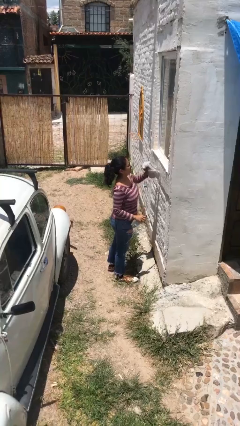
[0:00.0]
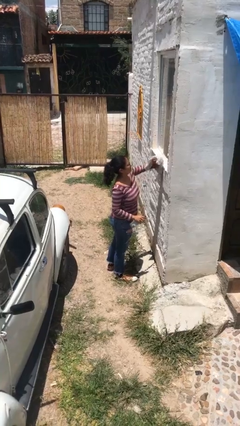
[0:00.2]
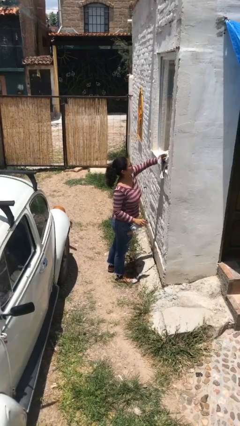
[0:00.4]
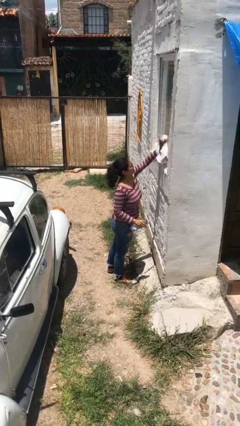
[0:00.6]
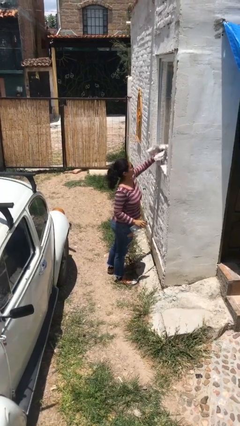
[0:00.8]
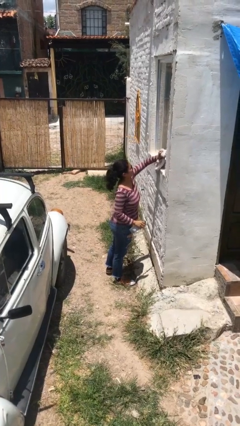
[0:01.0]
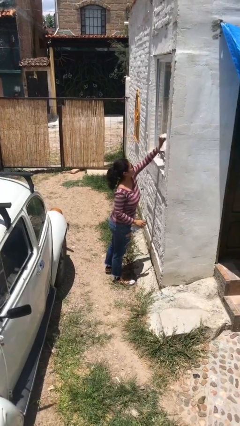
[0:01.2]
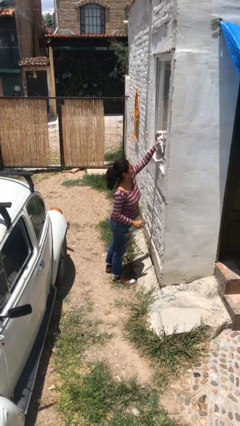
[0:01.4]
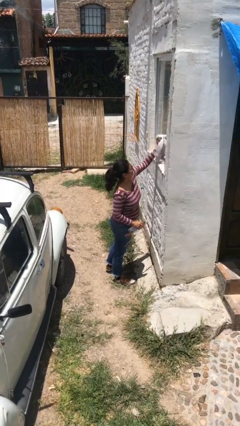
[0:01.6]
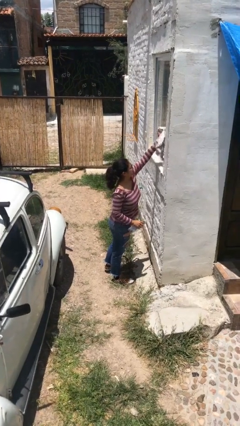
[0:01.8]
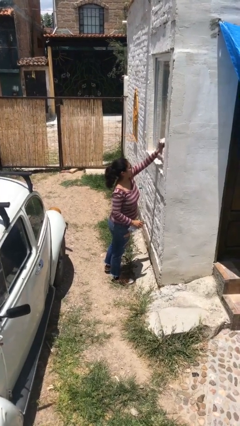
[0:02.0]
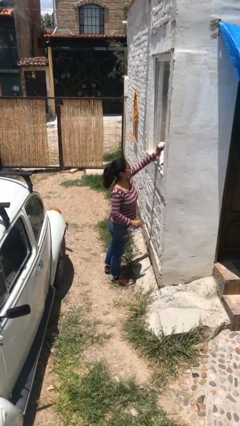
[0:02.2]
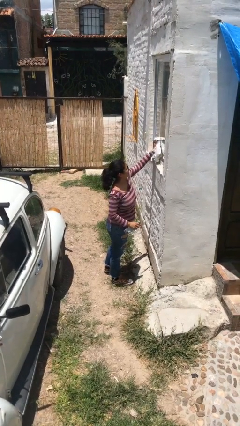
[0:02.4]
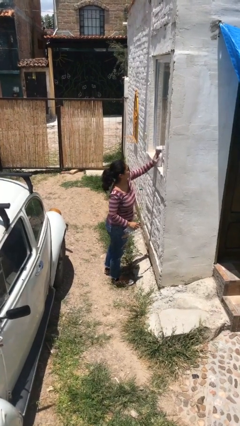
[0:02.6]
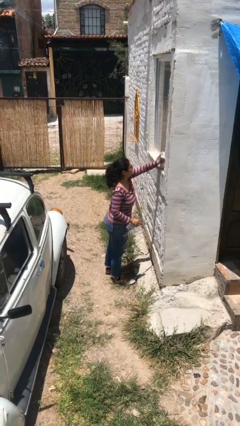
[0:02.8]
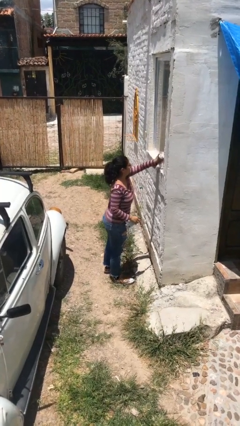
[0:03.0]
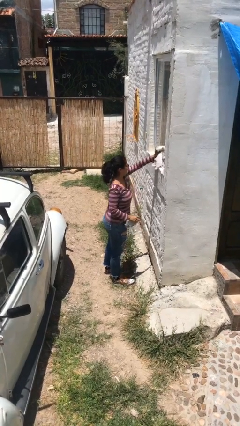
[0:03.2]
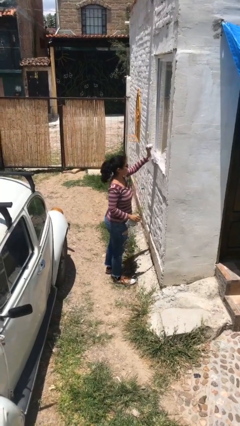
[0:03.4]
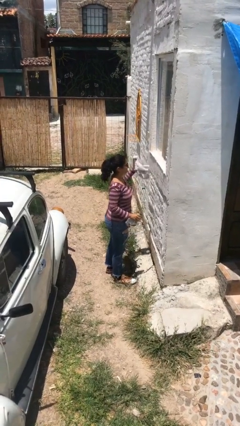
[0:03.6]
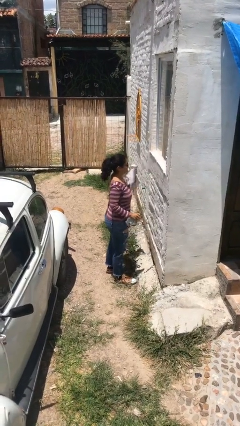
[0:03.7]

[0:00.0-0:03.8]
person washes window

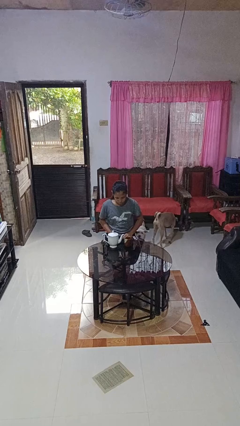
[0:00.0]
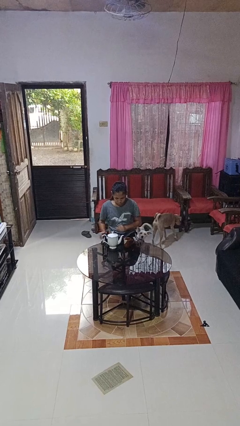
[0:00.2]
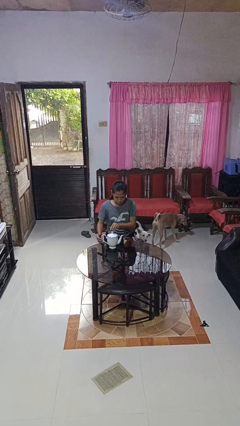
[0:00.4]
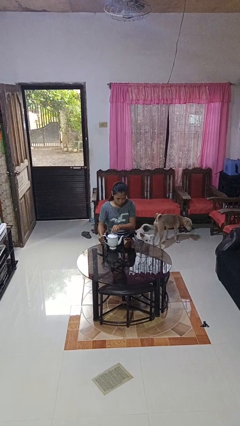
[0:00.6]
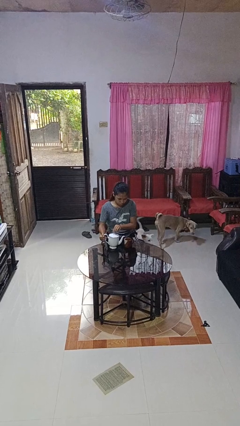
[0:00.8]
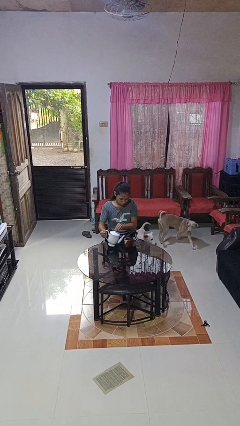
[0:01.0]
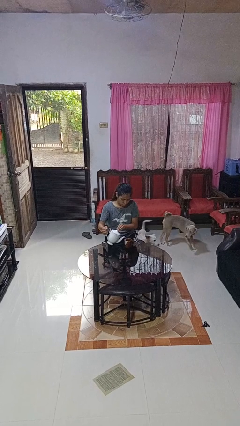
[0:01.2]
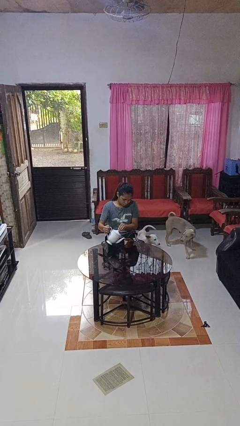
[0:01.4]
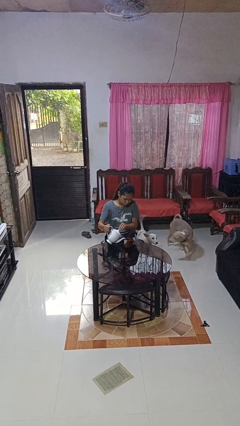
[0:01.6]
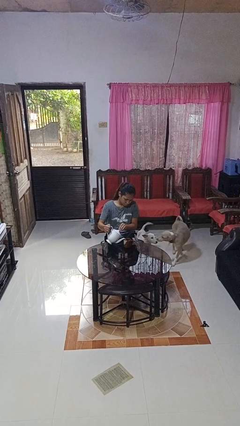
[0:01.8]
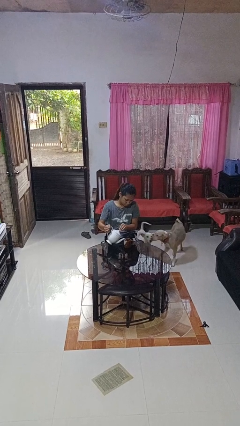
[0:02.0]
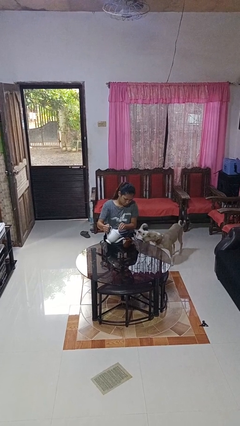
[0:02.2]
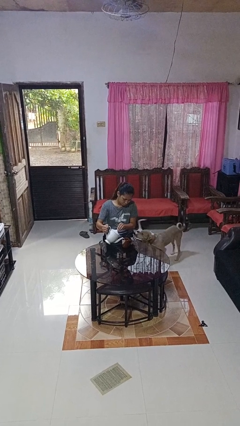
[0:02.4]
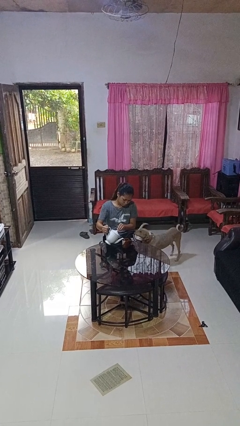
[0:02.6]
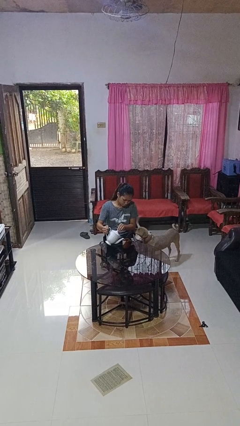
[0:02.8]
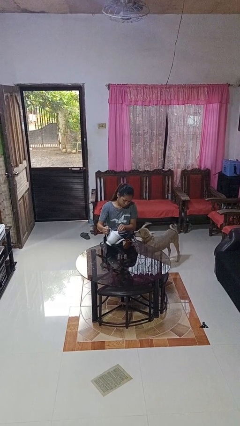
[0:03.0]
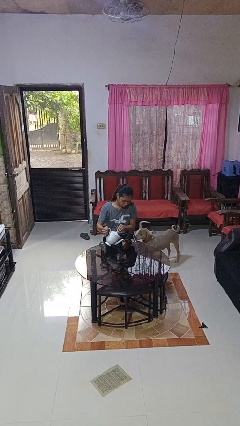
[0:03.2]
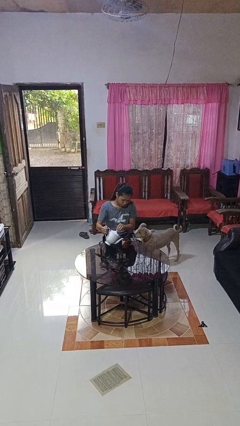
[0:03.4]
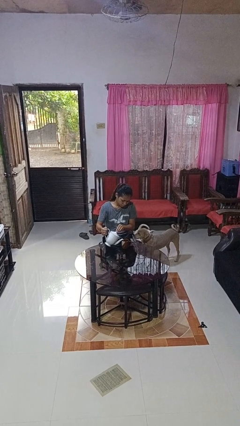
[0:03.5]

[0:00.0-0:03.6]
person pours coffee into mug

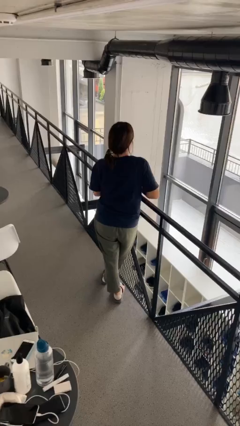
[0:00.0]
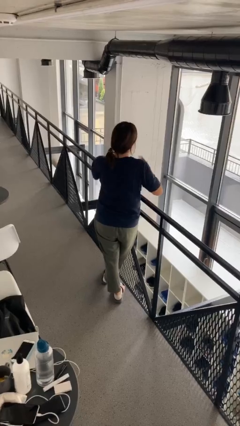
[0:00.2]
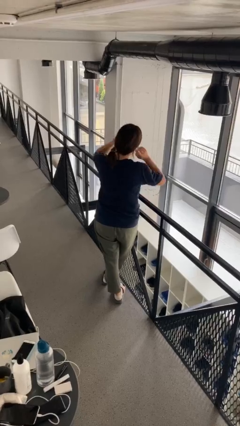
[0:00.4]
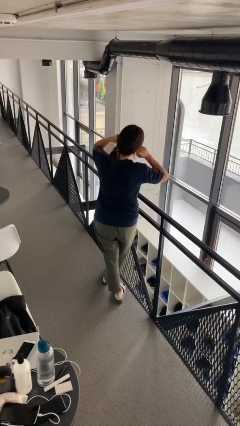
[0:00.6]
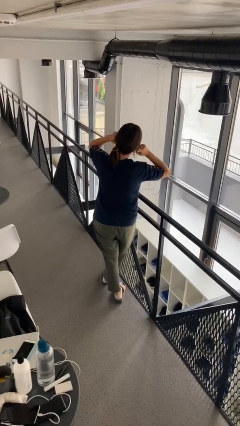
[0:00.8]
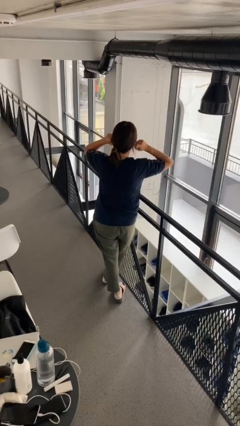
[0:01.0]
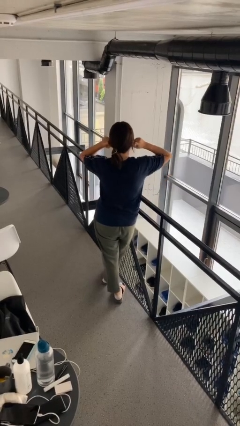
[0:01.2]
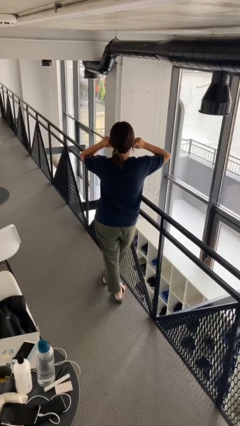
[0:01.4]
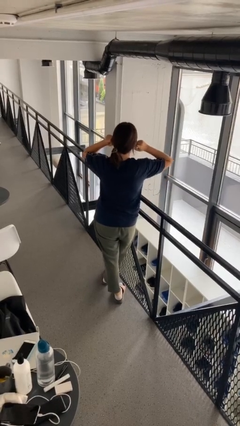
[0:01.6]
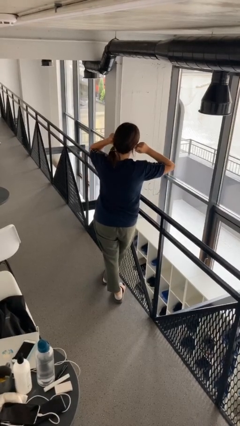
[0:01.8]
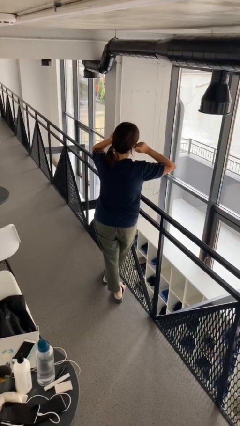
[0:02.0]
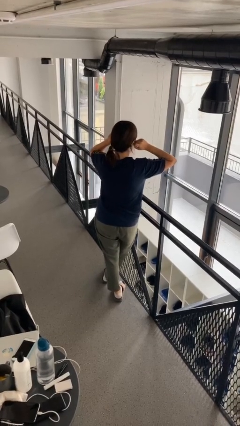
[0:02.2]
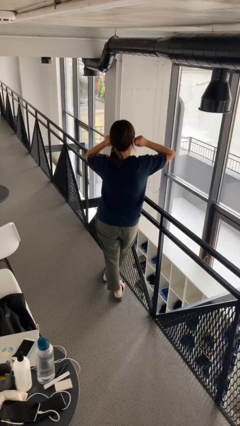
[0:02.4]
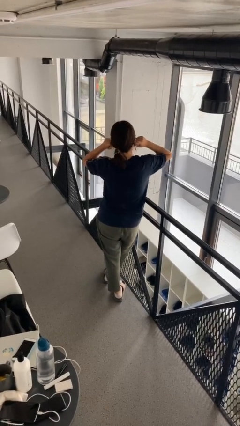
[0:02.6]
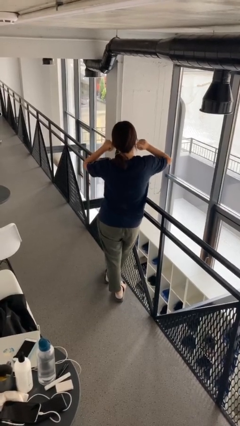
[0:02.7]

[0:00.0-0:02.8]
person puts fingers in ear

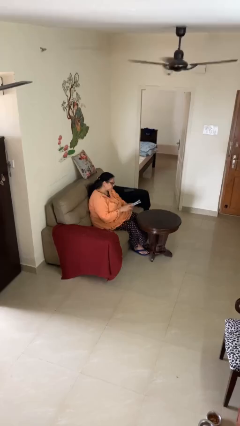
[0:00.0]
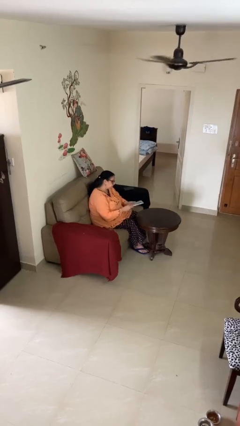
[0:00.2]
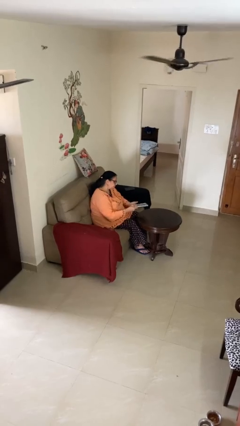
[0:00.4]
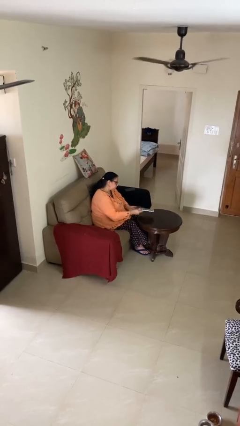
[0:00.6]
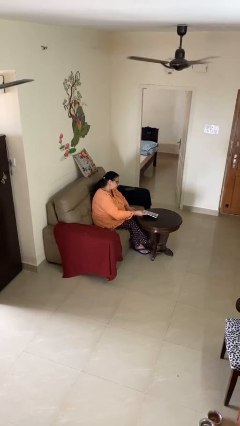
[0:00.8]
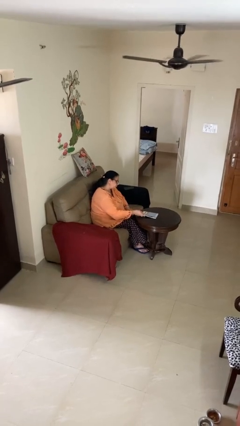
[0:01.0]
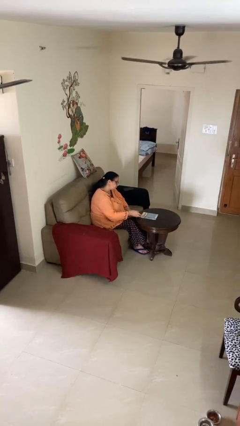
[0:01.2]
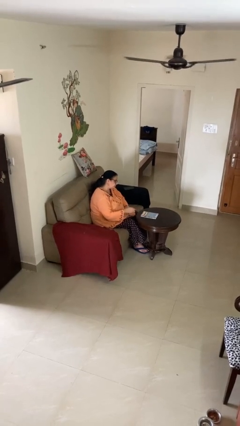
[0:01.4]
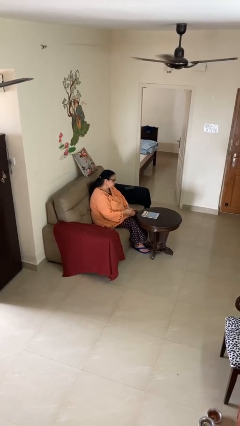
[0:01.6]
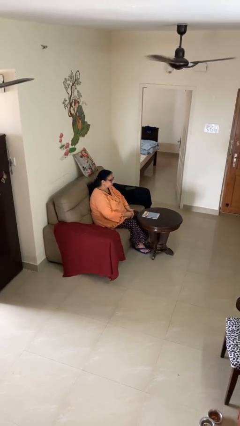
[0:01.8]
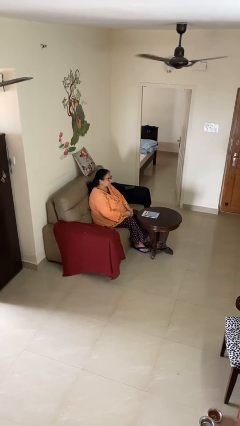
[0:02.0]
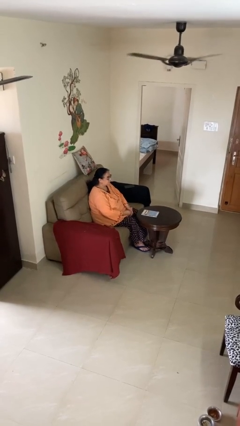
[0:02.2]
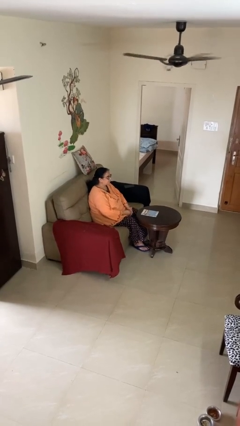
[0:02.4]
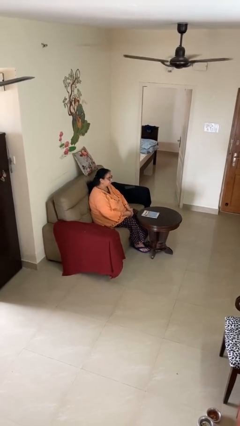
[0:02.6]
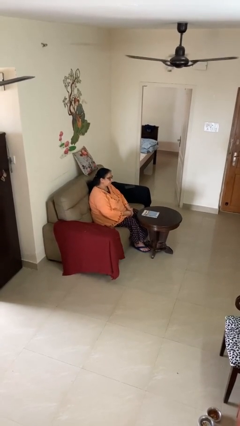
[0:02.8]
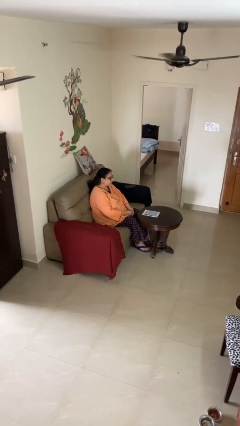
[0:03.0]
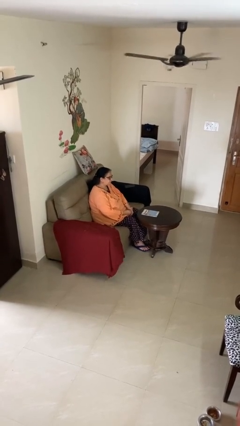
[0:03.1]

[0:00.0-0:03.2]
person puts down object on table

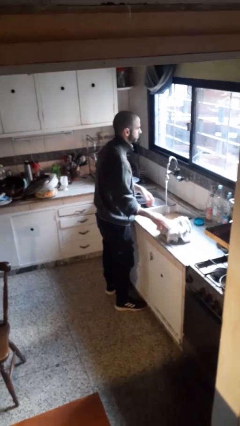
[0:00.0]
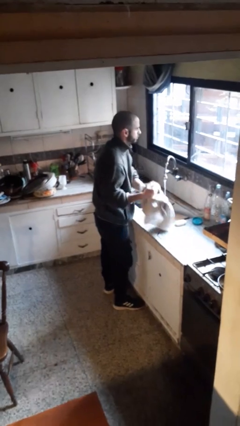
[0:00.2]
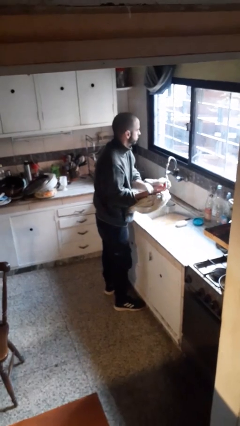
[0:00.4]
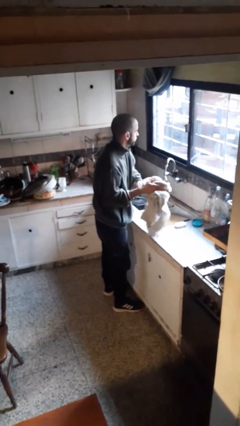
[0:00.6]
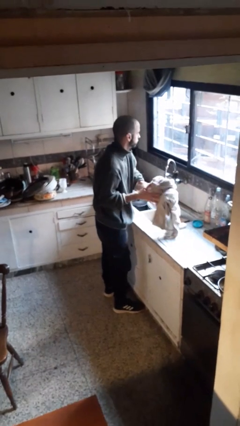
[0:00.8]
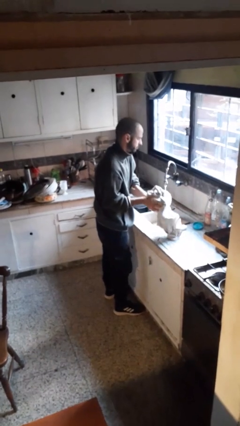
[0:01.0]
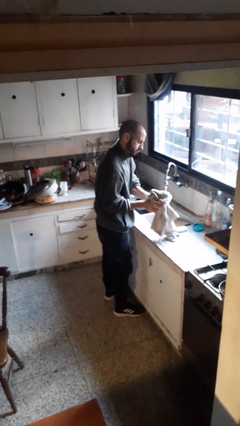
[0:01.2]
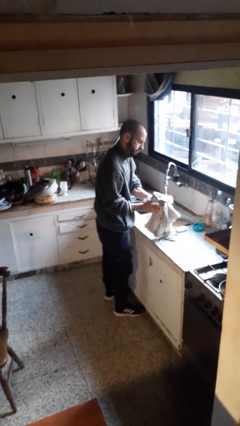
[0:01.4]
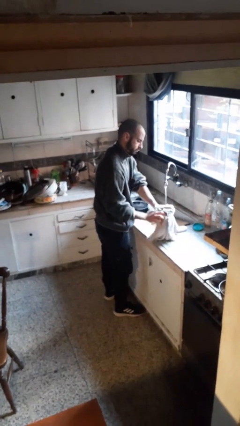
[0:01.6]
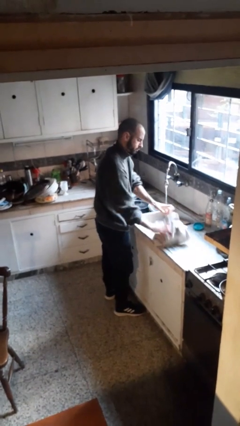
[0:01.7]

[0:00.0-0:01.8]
person dries hands with towel

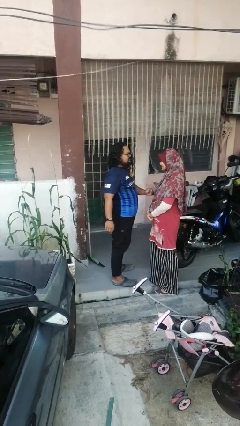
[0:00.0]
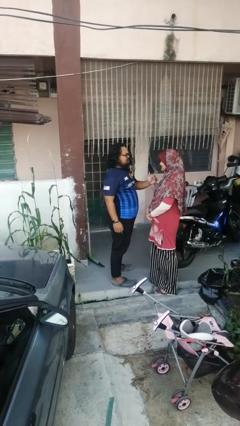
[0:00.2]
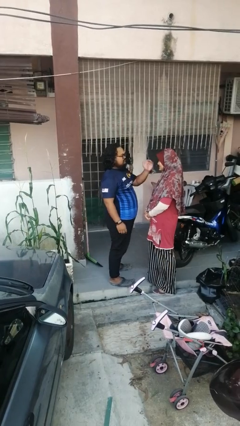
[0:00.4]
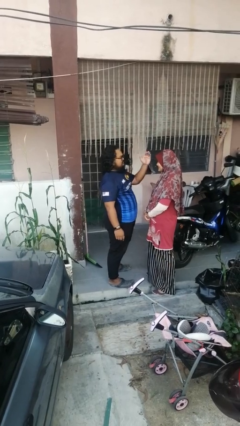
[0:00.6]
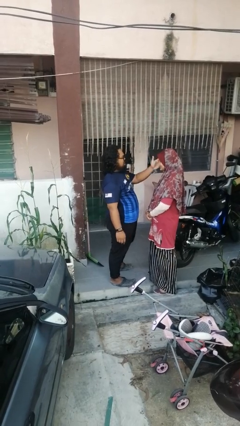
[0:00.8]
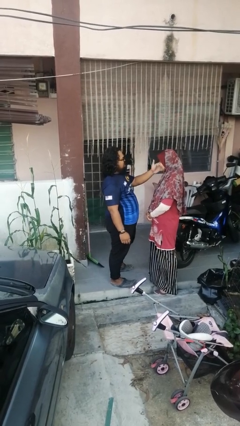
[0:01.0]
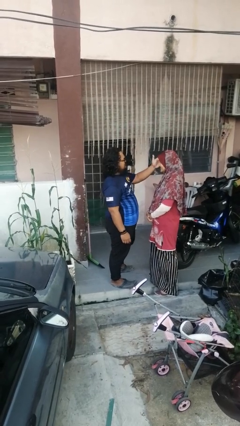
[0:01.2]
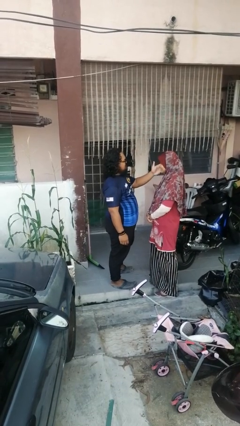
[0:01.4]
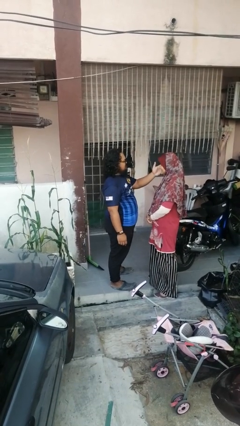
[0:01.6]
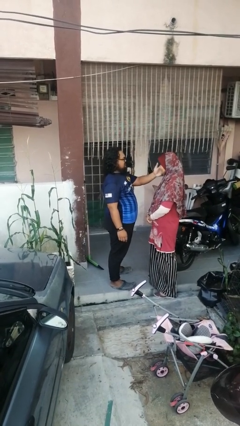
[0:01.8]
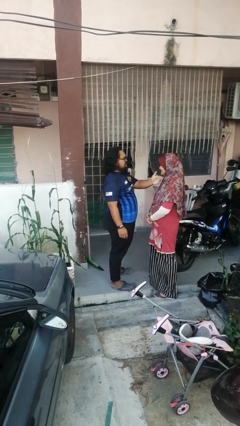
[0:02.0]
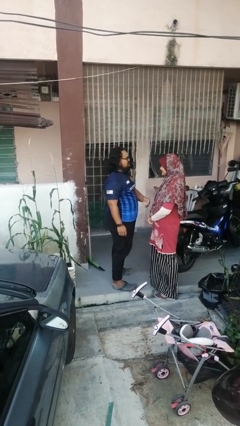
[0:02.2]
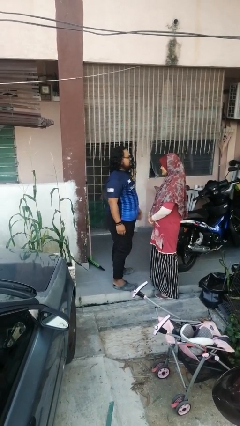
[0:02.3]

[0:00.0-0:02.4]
person touches face of person
